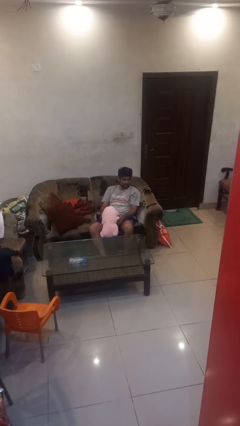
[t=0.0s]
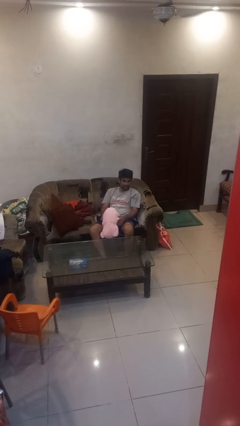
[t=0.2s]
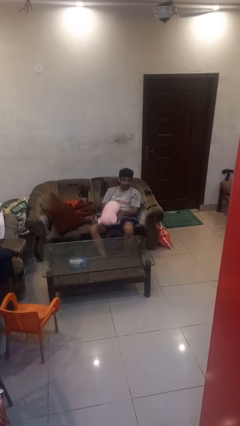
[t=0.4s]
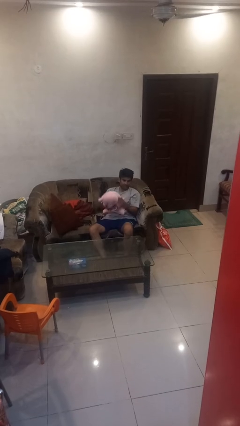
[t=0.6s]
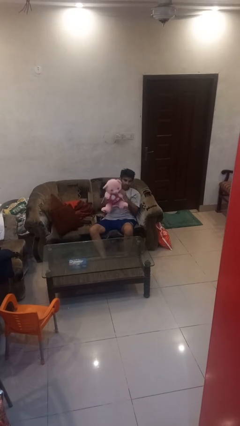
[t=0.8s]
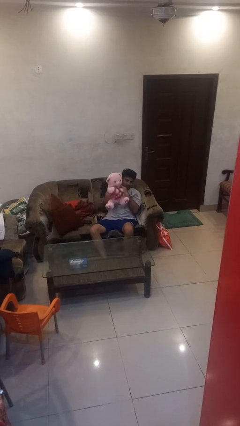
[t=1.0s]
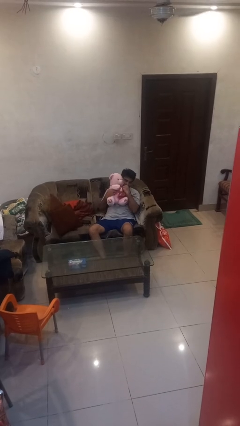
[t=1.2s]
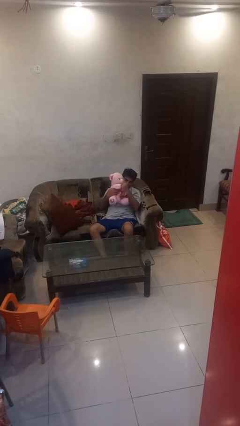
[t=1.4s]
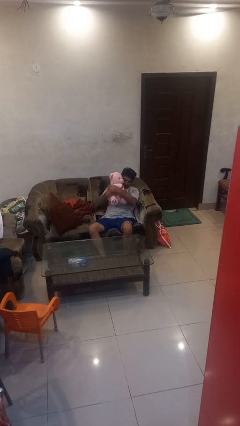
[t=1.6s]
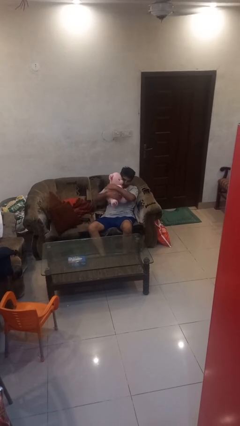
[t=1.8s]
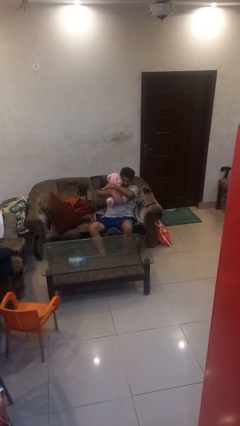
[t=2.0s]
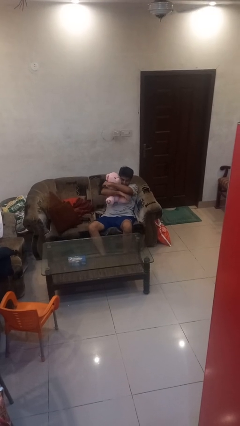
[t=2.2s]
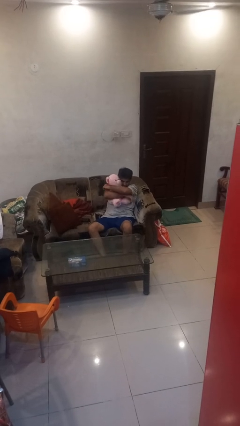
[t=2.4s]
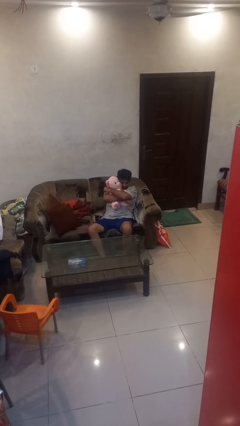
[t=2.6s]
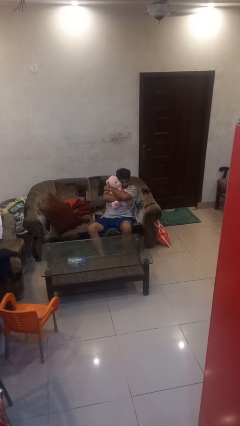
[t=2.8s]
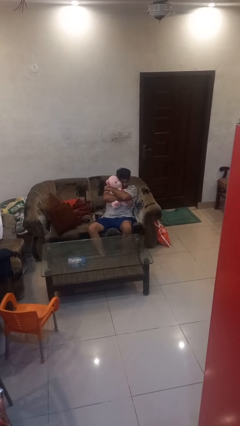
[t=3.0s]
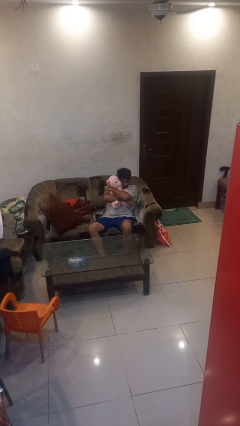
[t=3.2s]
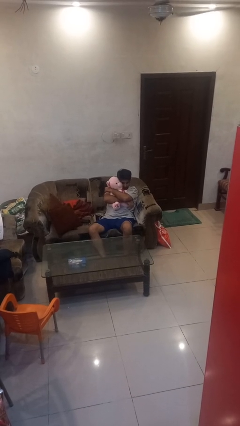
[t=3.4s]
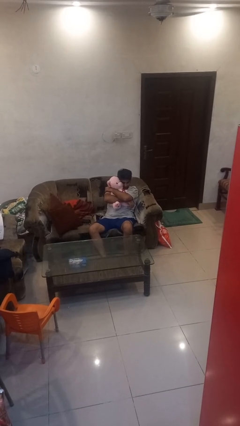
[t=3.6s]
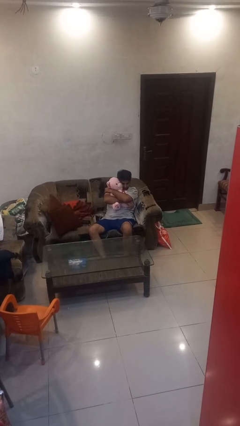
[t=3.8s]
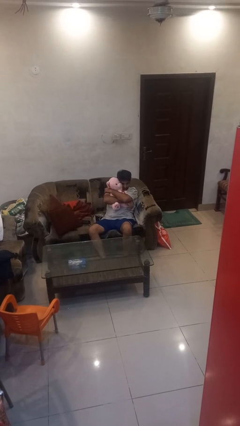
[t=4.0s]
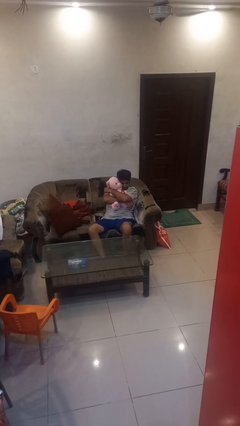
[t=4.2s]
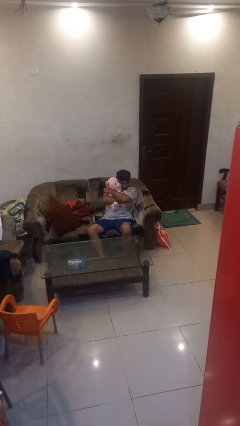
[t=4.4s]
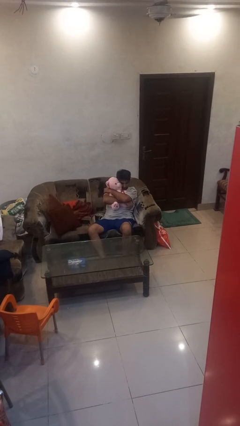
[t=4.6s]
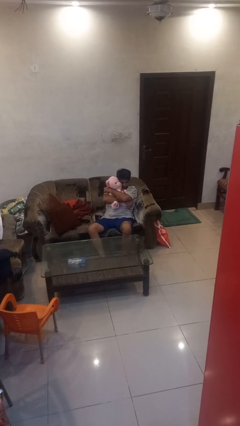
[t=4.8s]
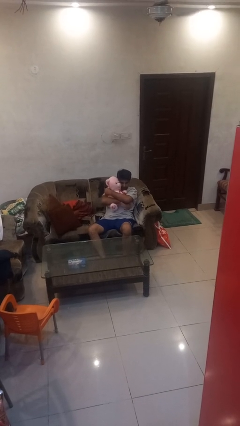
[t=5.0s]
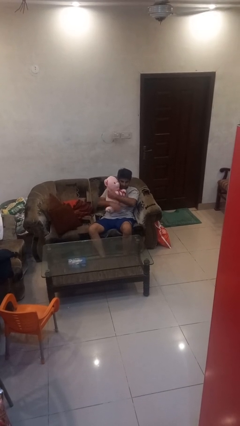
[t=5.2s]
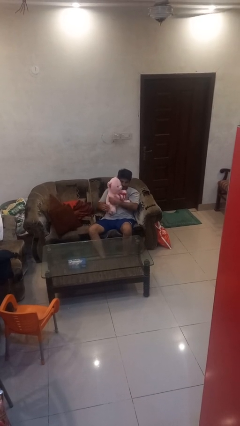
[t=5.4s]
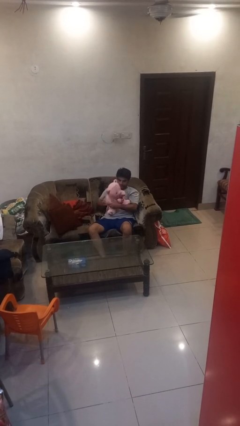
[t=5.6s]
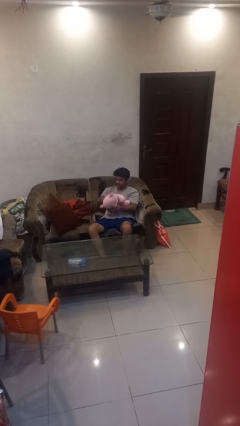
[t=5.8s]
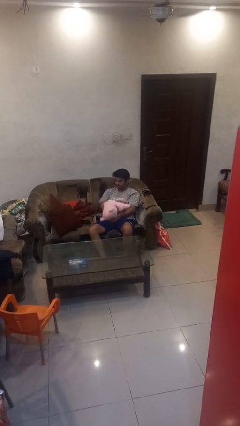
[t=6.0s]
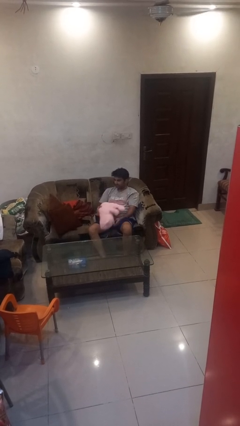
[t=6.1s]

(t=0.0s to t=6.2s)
person hugs stuffed animal

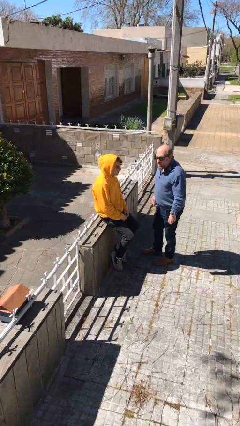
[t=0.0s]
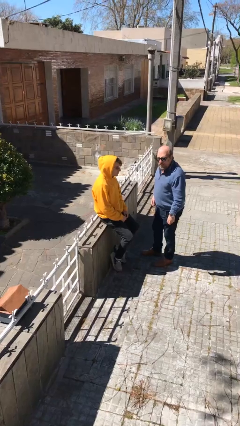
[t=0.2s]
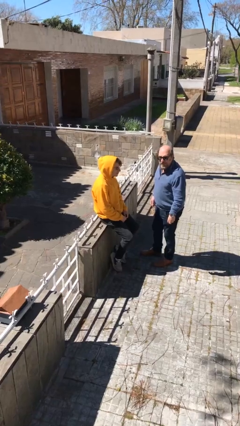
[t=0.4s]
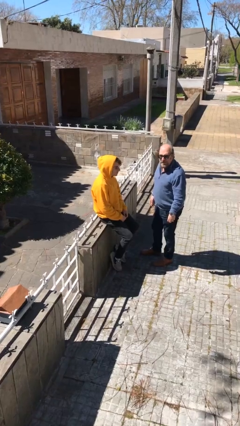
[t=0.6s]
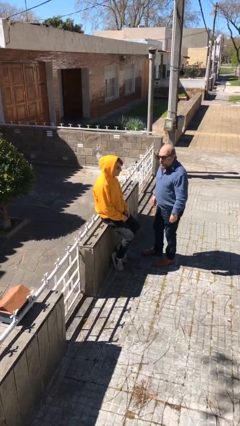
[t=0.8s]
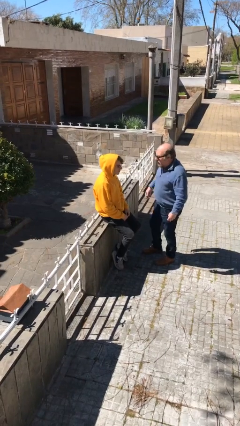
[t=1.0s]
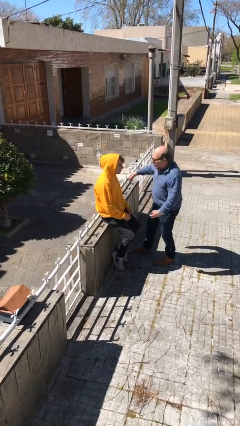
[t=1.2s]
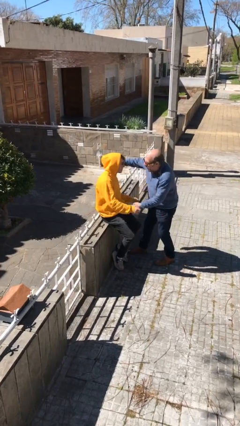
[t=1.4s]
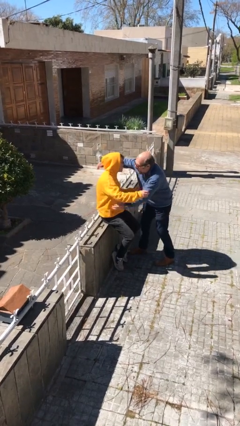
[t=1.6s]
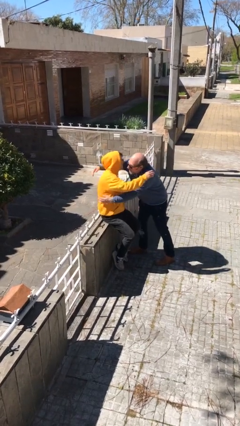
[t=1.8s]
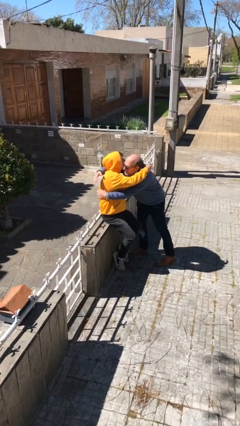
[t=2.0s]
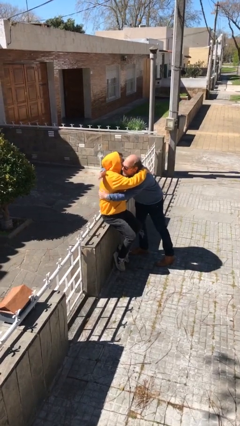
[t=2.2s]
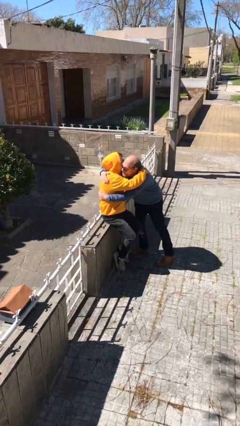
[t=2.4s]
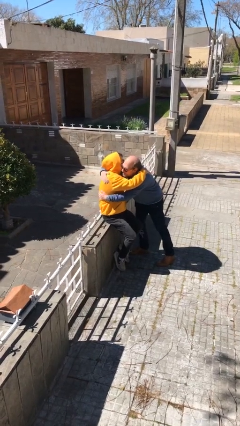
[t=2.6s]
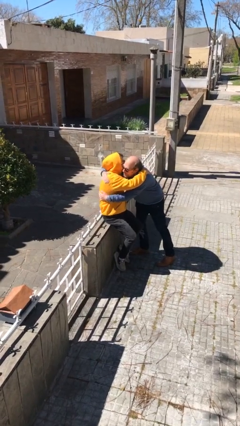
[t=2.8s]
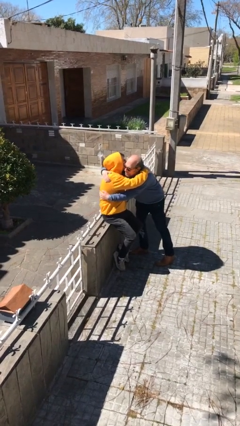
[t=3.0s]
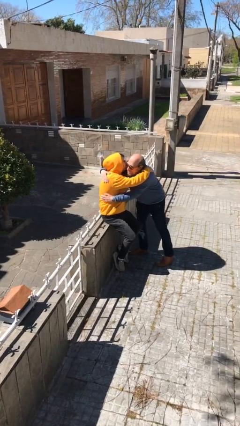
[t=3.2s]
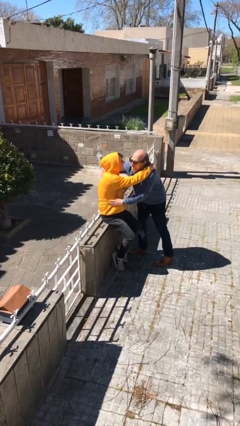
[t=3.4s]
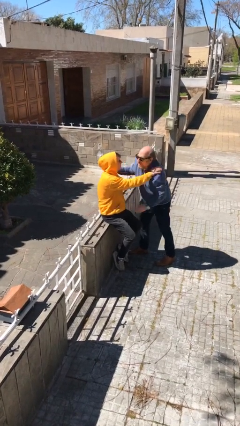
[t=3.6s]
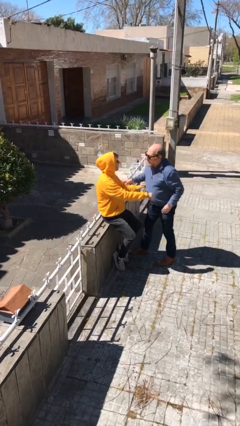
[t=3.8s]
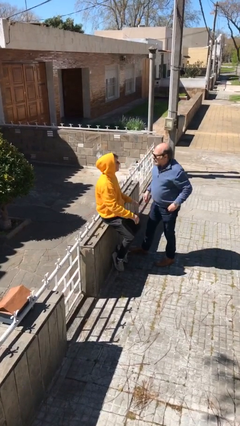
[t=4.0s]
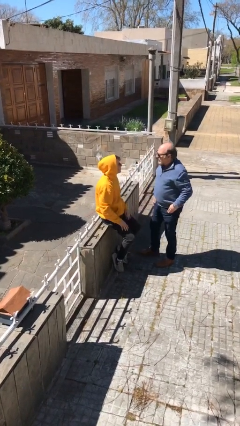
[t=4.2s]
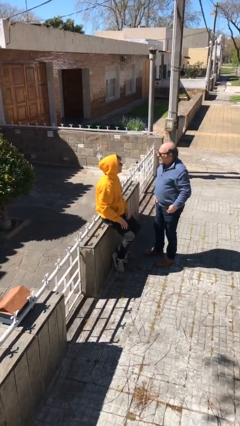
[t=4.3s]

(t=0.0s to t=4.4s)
person embraces person

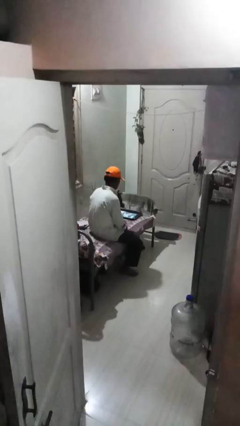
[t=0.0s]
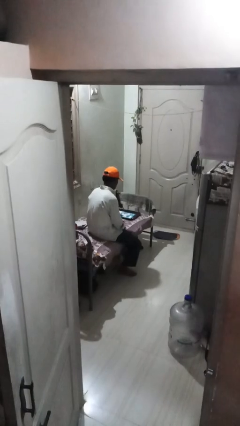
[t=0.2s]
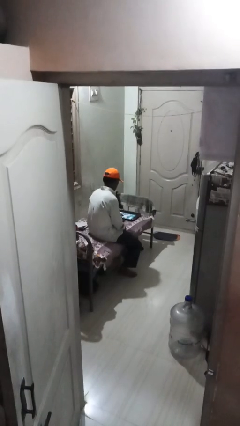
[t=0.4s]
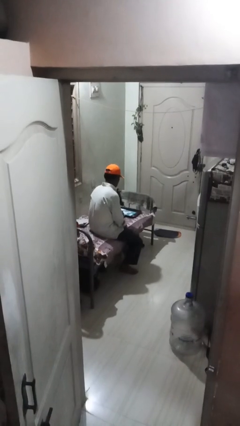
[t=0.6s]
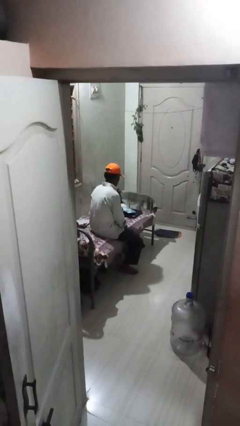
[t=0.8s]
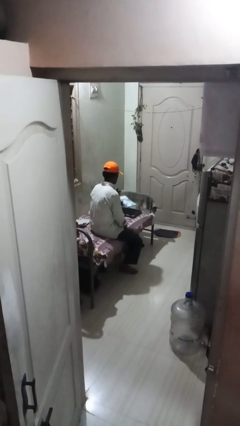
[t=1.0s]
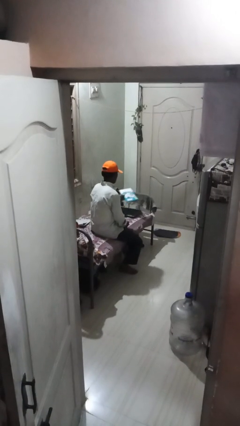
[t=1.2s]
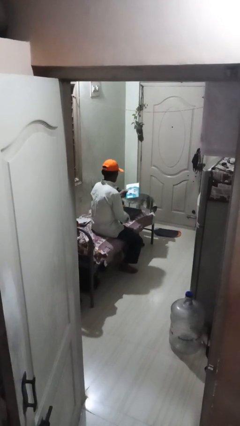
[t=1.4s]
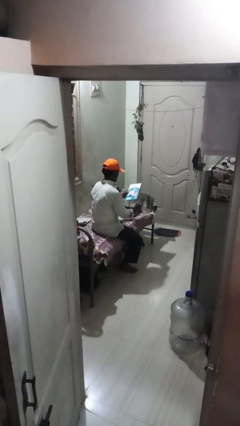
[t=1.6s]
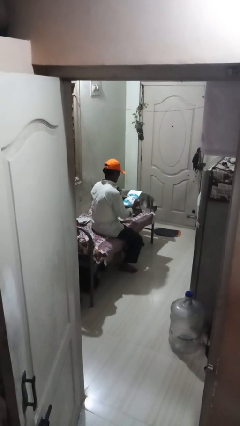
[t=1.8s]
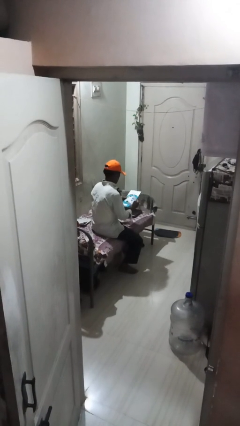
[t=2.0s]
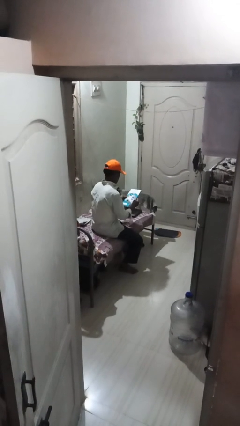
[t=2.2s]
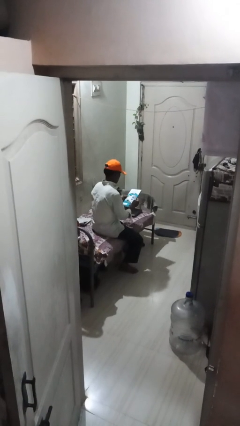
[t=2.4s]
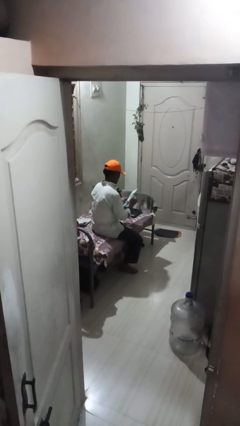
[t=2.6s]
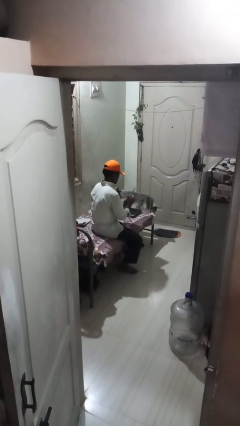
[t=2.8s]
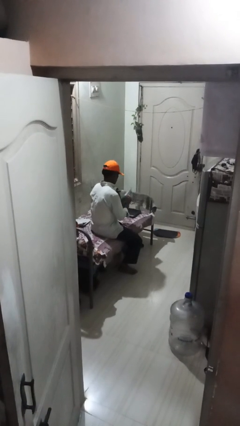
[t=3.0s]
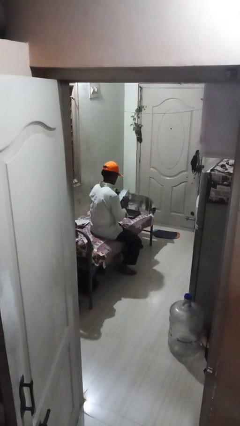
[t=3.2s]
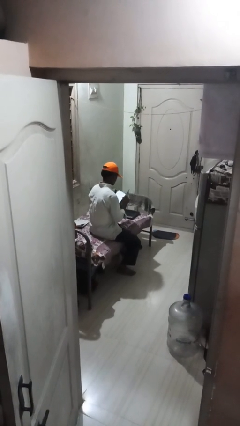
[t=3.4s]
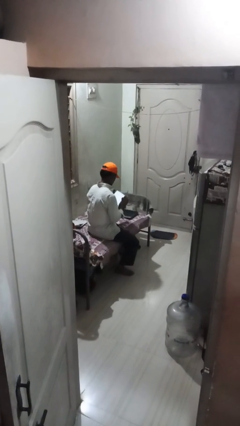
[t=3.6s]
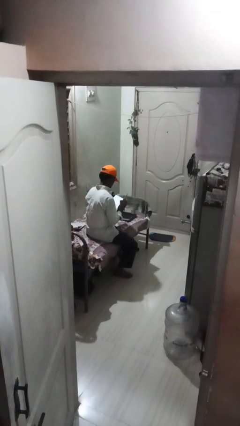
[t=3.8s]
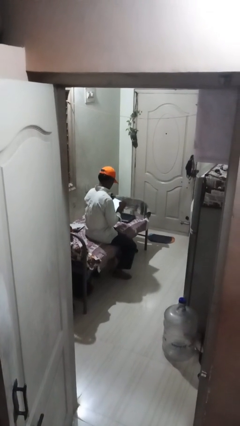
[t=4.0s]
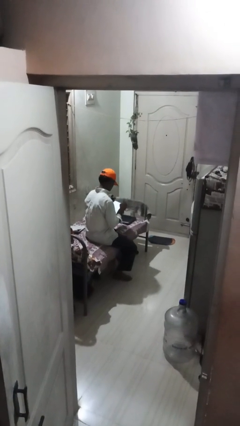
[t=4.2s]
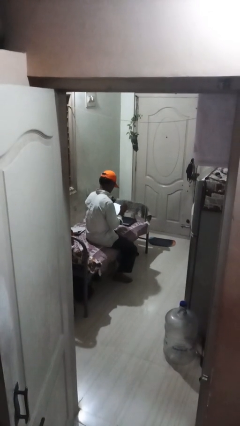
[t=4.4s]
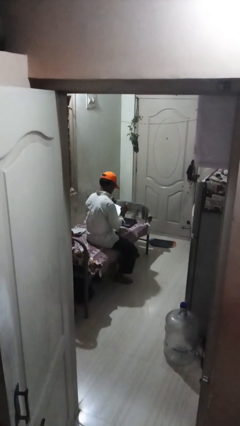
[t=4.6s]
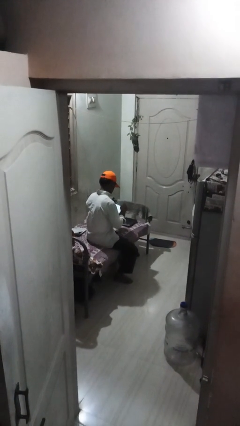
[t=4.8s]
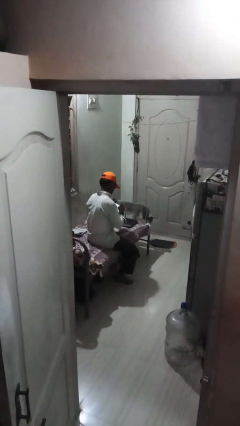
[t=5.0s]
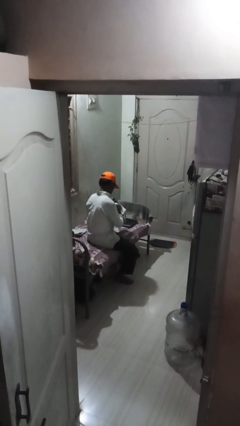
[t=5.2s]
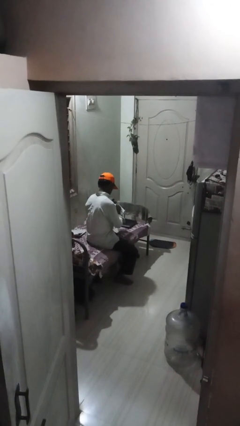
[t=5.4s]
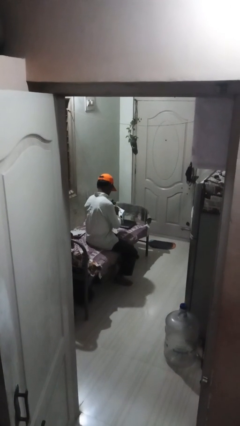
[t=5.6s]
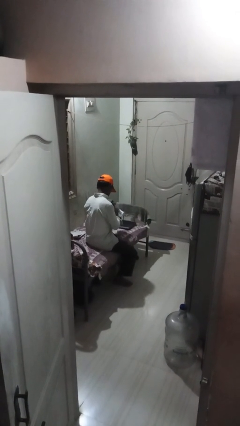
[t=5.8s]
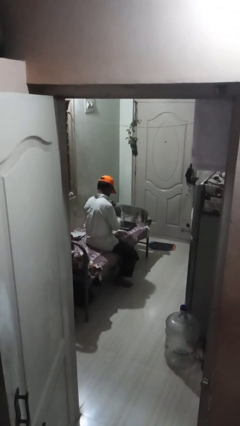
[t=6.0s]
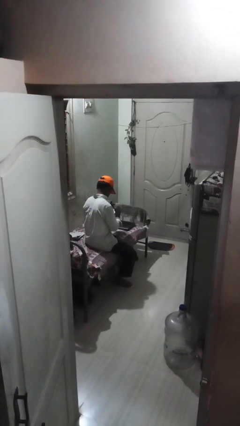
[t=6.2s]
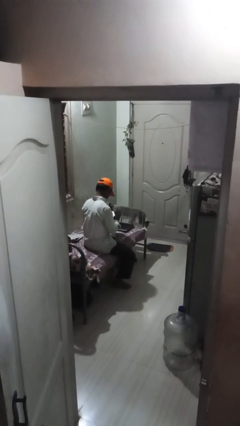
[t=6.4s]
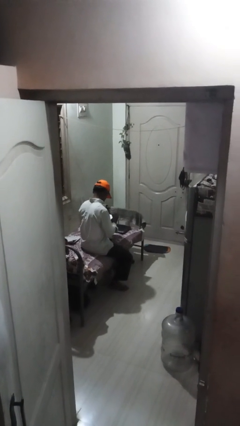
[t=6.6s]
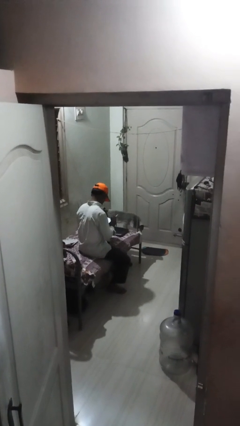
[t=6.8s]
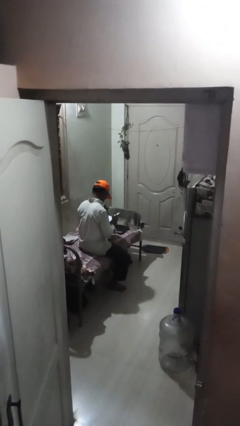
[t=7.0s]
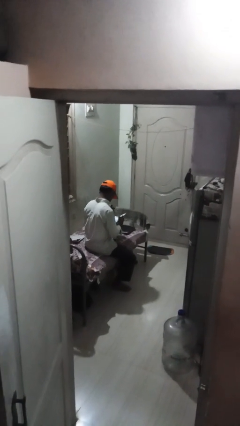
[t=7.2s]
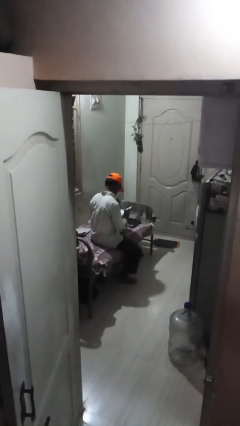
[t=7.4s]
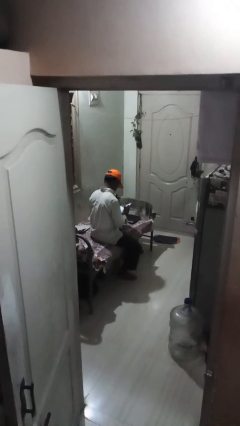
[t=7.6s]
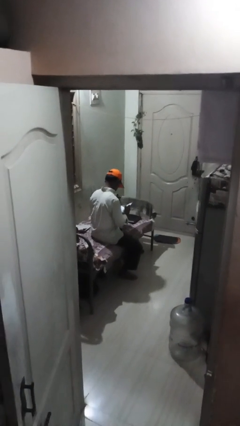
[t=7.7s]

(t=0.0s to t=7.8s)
person reads magazine
